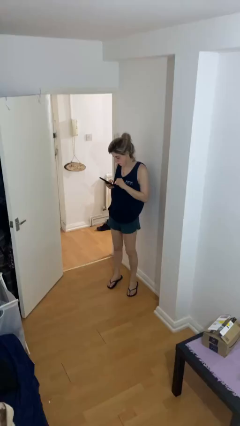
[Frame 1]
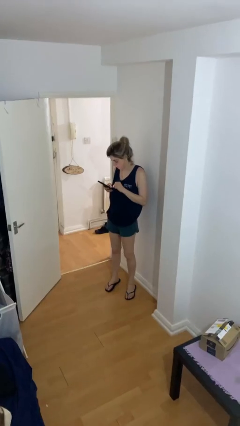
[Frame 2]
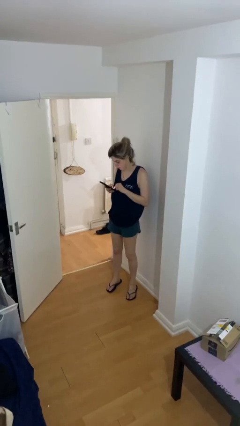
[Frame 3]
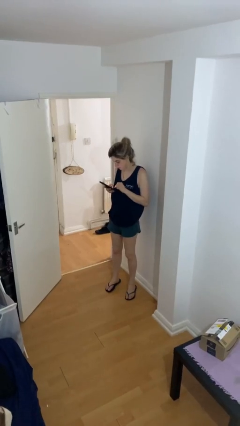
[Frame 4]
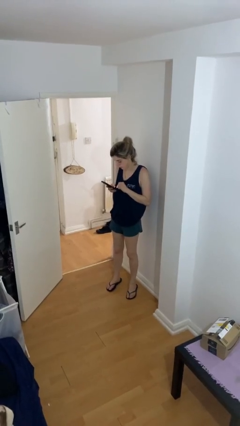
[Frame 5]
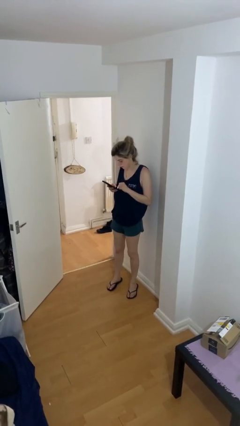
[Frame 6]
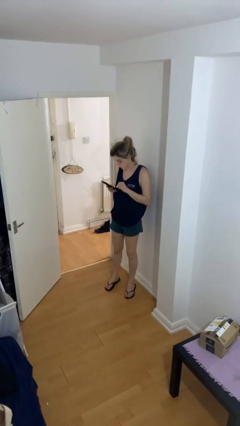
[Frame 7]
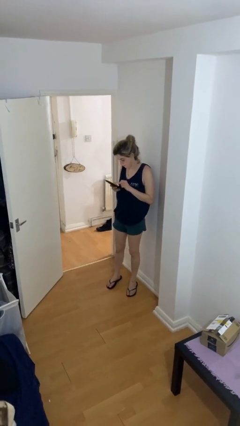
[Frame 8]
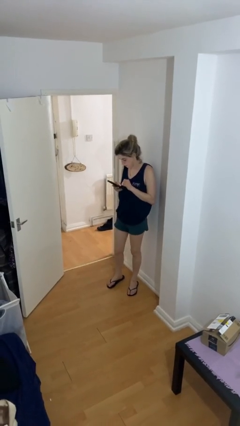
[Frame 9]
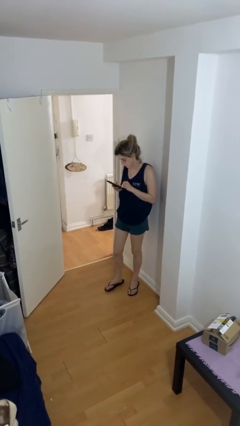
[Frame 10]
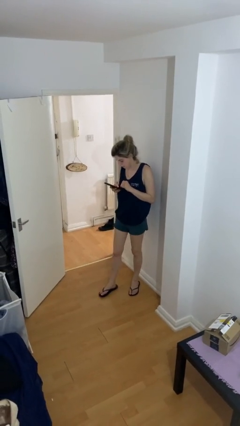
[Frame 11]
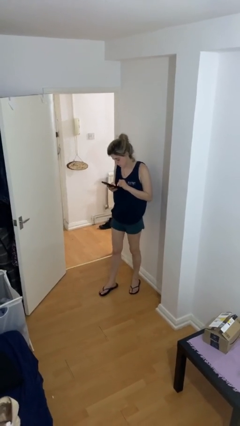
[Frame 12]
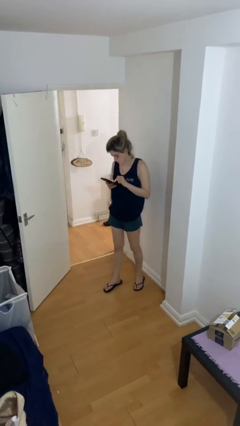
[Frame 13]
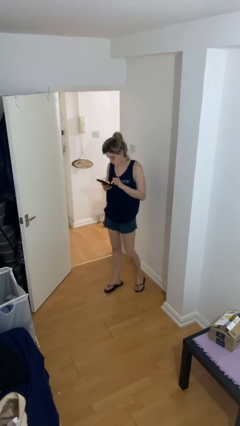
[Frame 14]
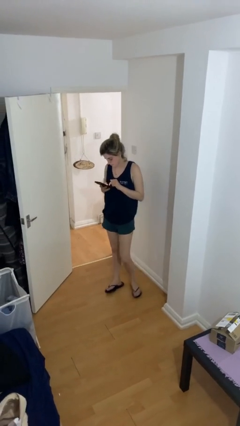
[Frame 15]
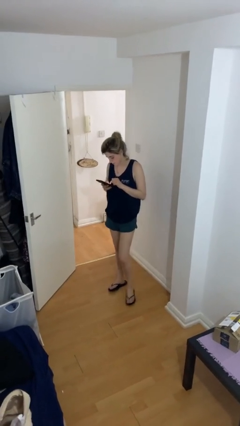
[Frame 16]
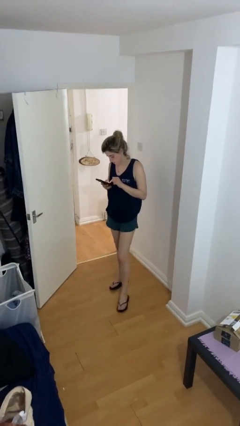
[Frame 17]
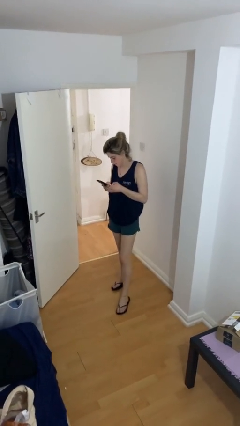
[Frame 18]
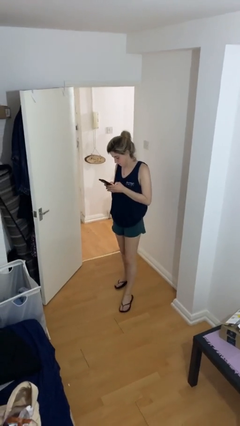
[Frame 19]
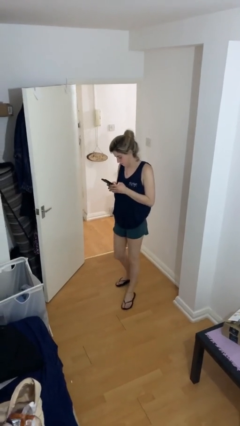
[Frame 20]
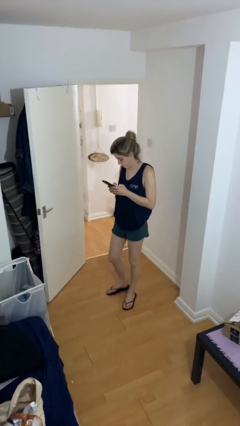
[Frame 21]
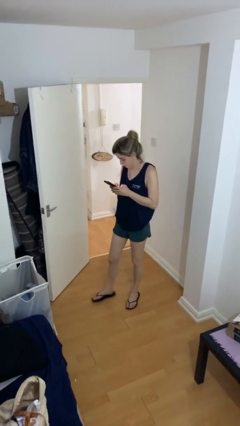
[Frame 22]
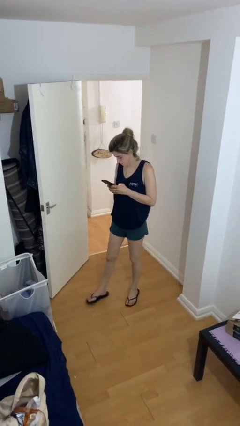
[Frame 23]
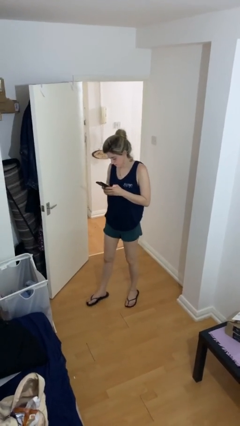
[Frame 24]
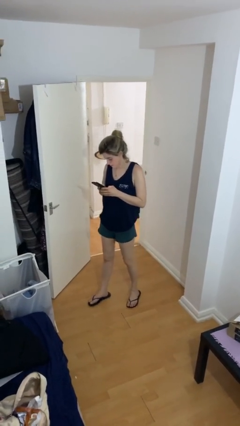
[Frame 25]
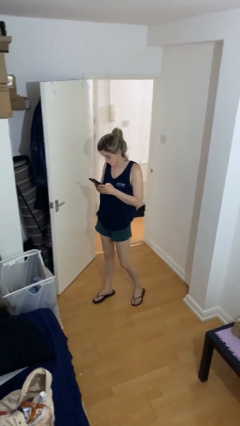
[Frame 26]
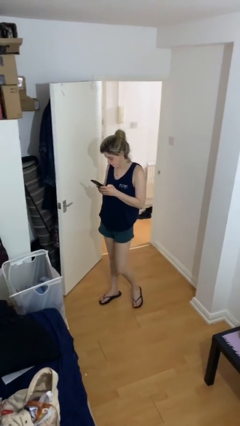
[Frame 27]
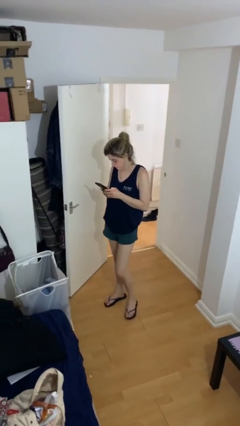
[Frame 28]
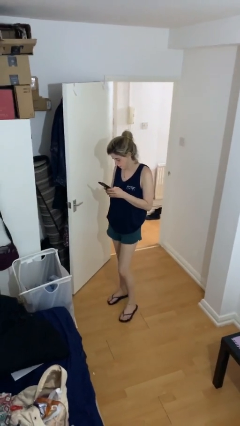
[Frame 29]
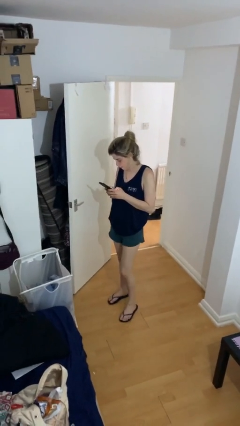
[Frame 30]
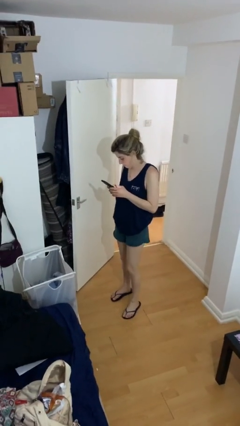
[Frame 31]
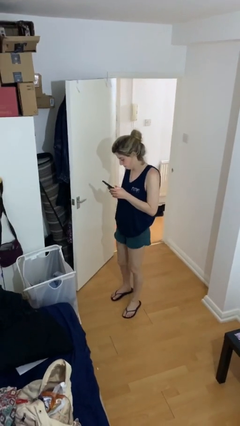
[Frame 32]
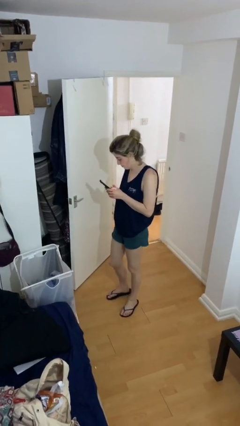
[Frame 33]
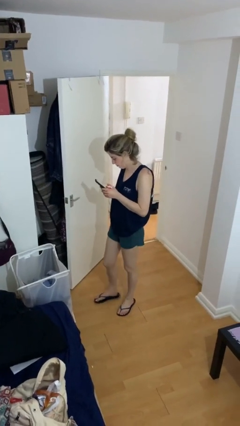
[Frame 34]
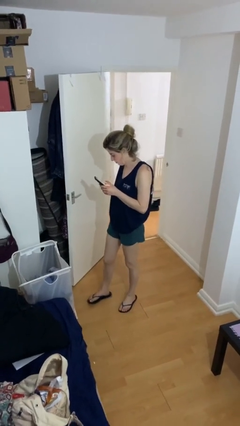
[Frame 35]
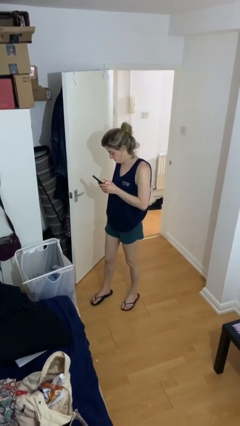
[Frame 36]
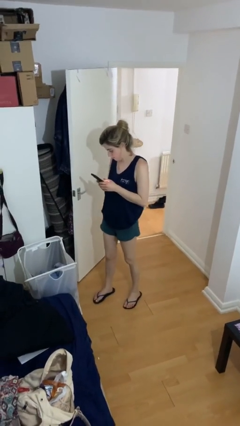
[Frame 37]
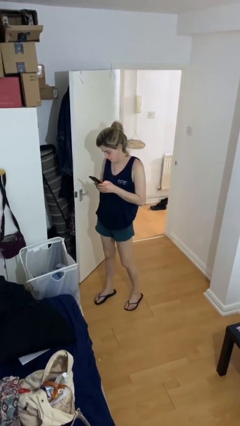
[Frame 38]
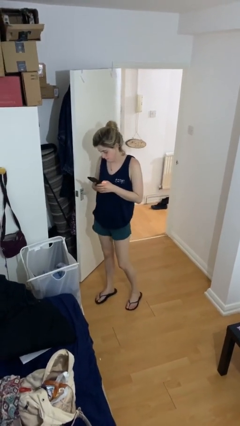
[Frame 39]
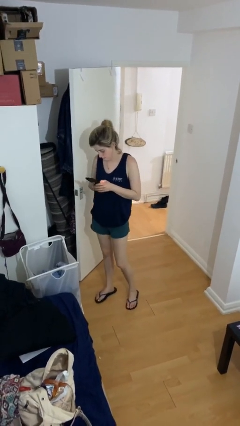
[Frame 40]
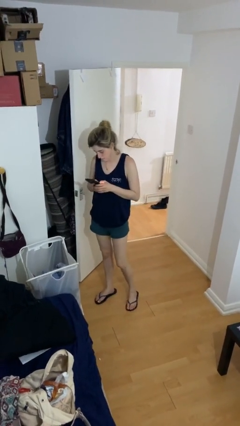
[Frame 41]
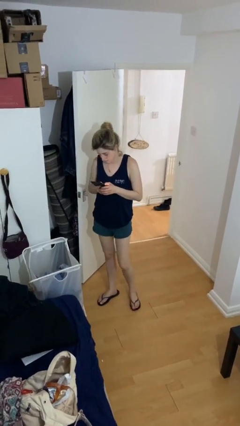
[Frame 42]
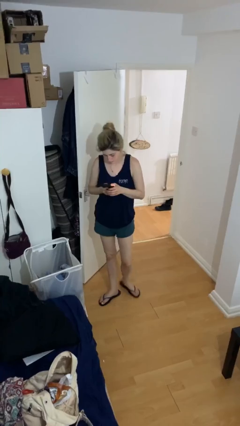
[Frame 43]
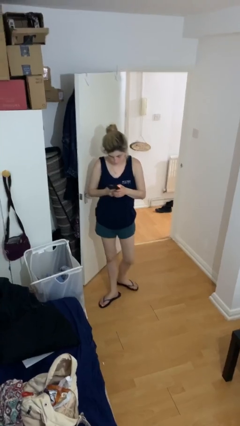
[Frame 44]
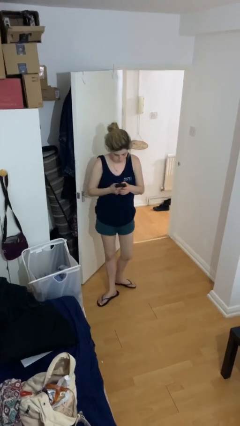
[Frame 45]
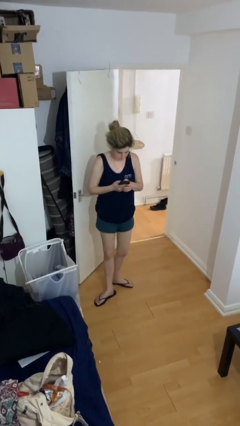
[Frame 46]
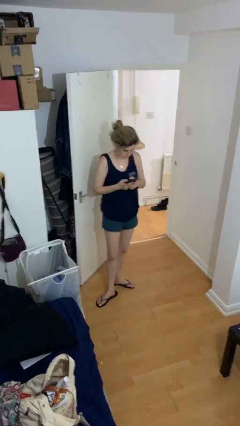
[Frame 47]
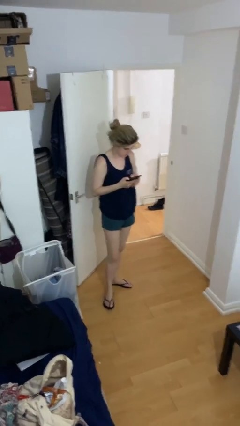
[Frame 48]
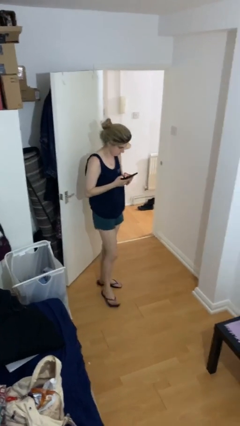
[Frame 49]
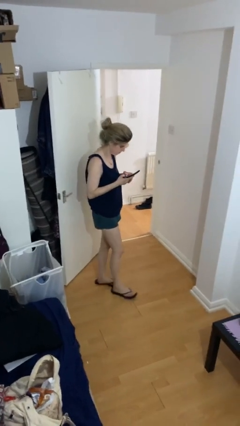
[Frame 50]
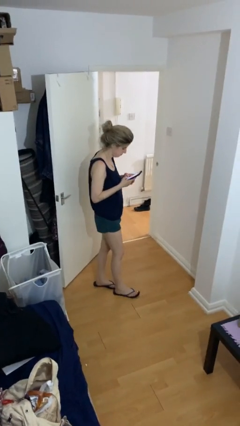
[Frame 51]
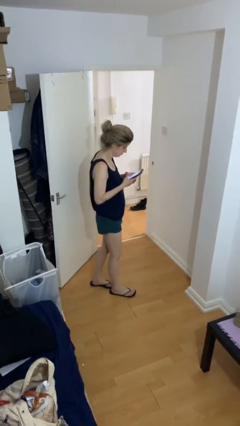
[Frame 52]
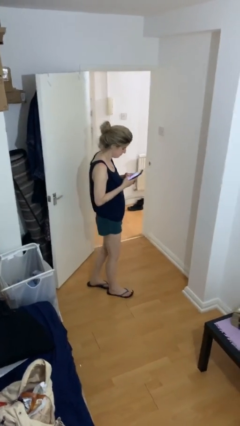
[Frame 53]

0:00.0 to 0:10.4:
person texts on phone

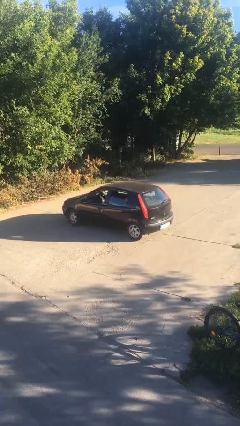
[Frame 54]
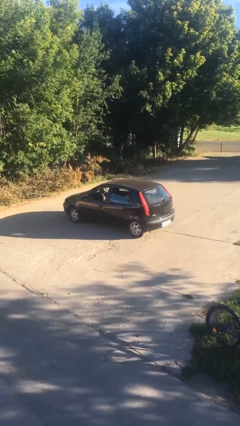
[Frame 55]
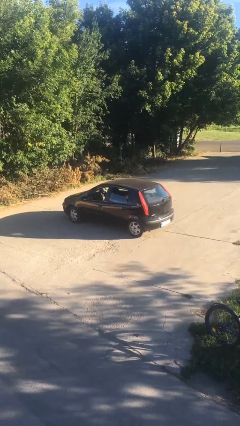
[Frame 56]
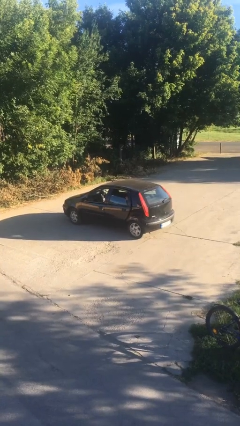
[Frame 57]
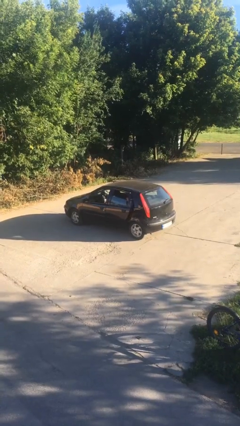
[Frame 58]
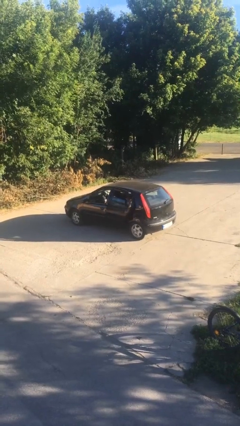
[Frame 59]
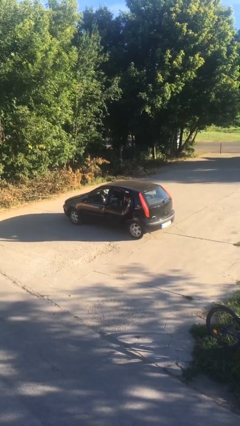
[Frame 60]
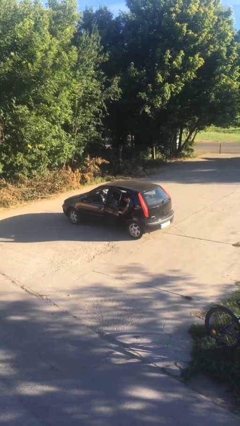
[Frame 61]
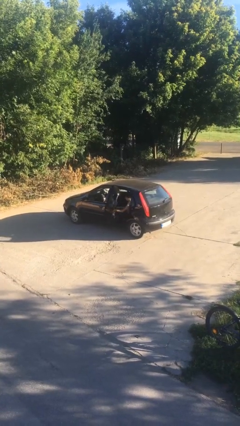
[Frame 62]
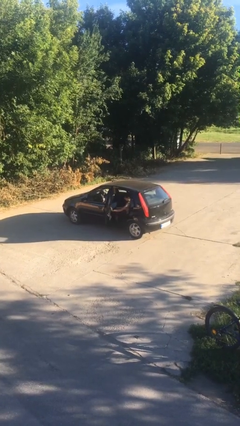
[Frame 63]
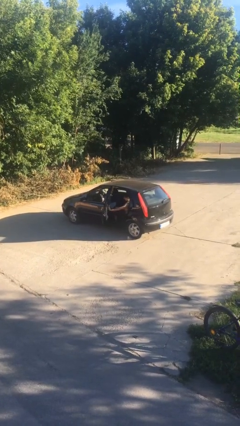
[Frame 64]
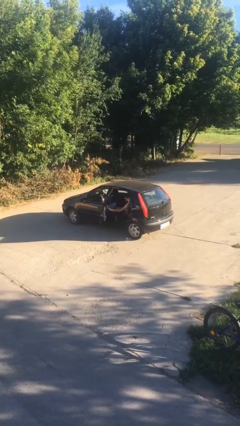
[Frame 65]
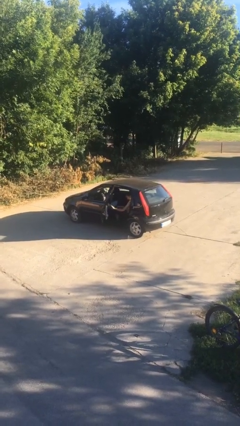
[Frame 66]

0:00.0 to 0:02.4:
person opens car door

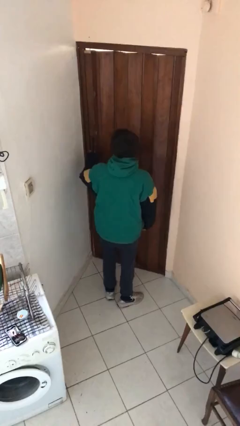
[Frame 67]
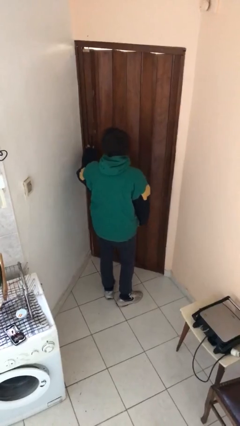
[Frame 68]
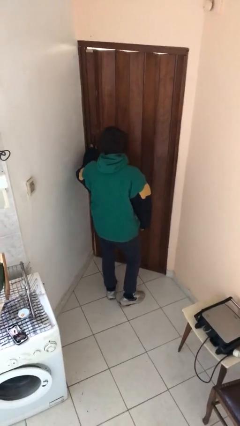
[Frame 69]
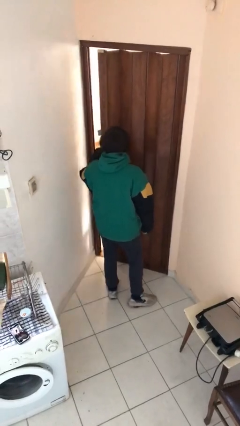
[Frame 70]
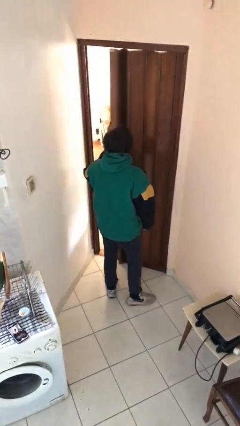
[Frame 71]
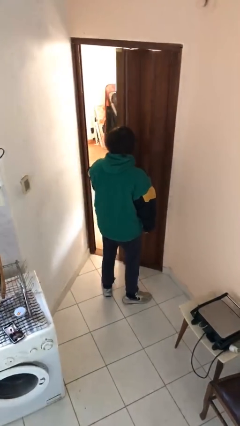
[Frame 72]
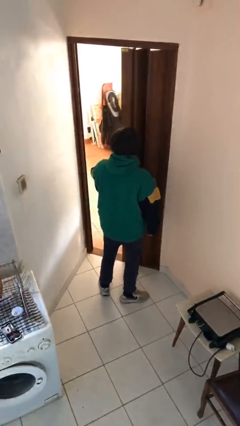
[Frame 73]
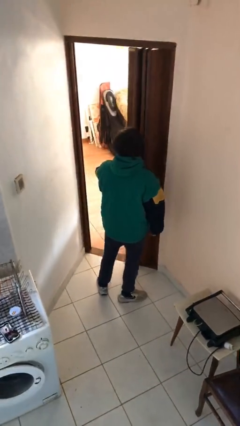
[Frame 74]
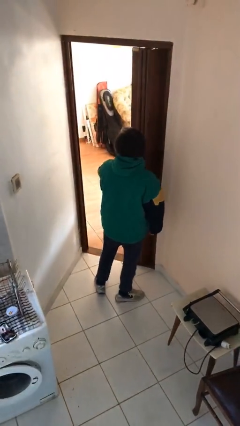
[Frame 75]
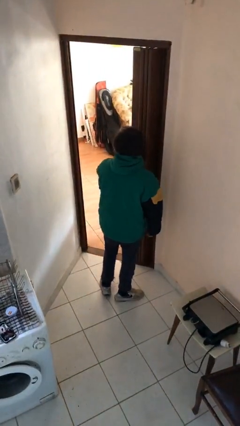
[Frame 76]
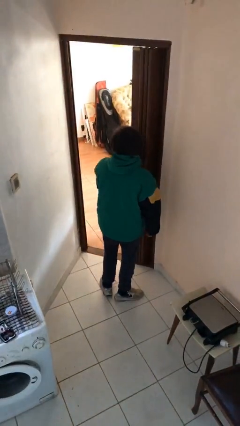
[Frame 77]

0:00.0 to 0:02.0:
person opens sliding door

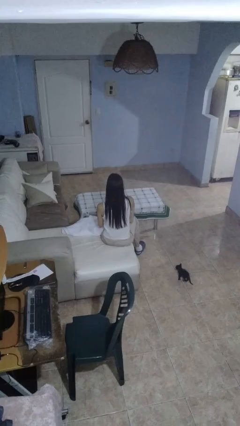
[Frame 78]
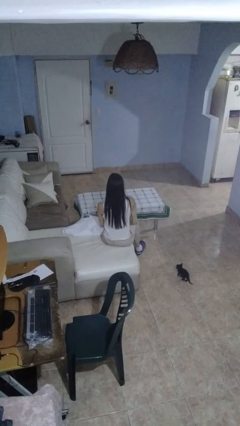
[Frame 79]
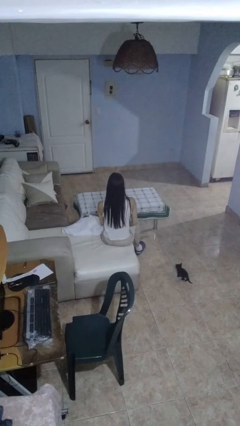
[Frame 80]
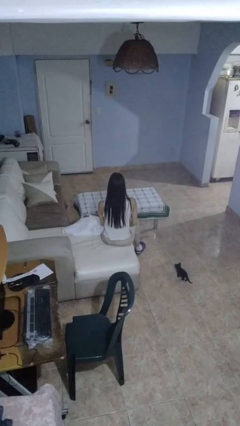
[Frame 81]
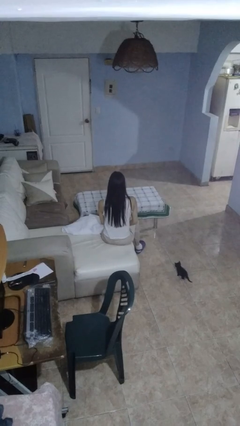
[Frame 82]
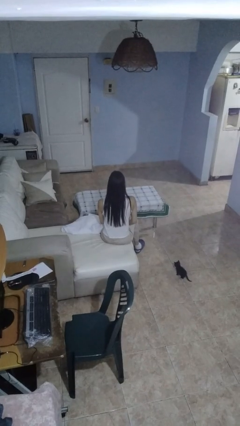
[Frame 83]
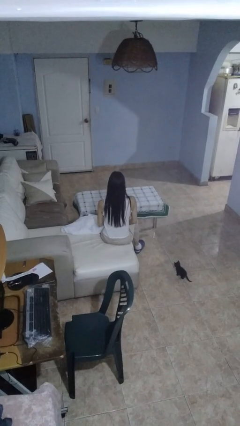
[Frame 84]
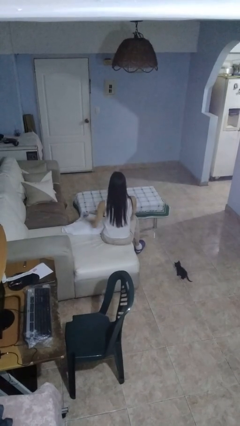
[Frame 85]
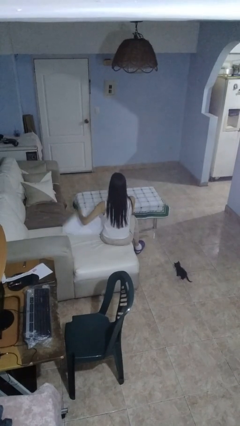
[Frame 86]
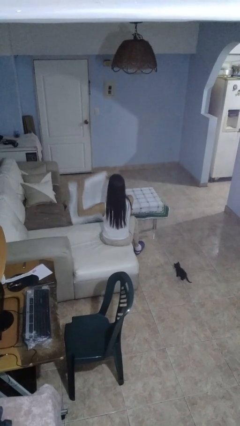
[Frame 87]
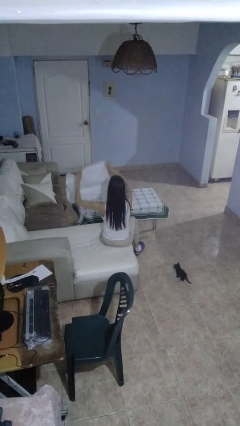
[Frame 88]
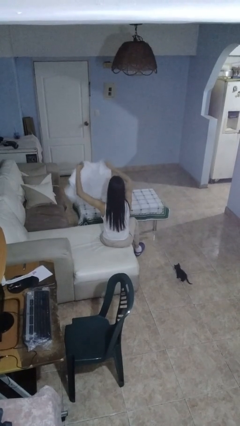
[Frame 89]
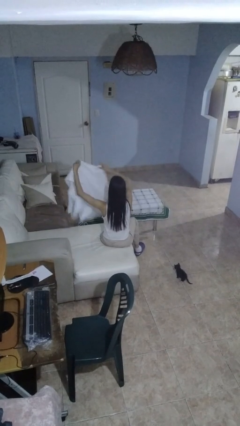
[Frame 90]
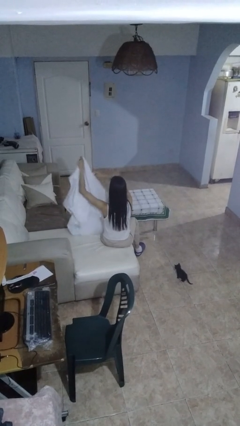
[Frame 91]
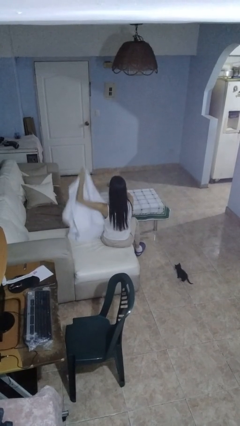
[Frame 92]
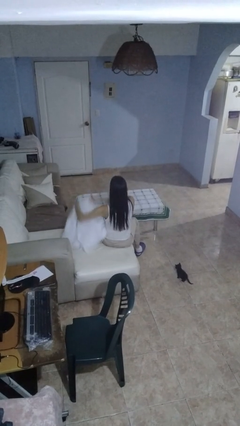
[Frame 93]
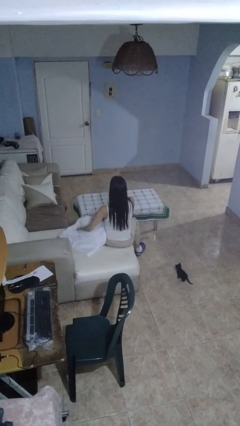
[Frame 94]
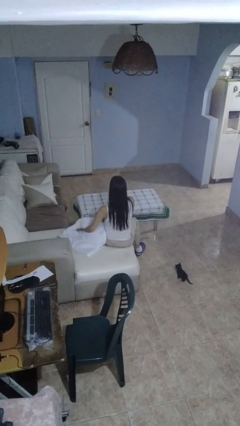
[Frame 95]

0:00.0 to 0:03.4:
person unfolds blanket
